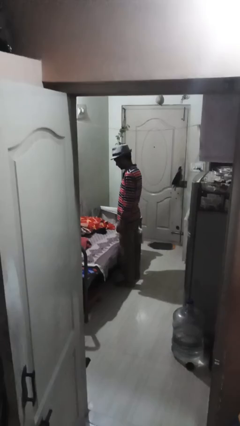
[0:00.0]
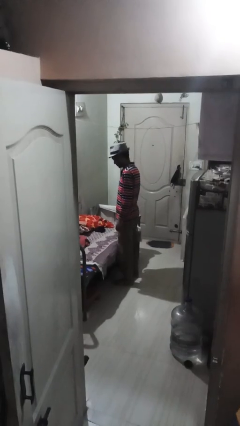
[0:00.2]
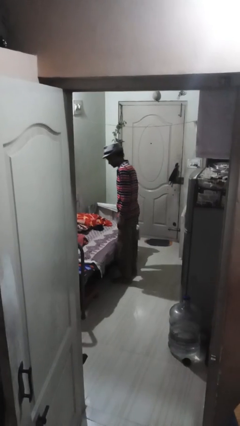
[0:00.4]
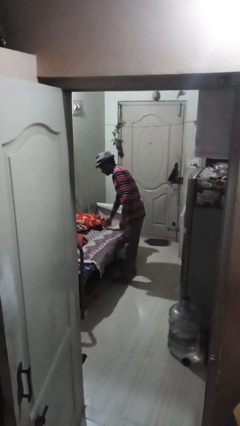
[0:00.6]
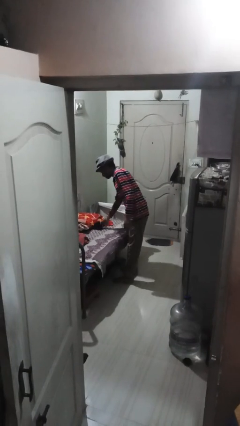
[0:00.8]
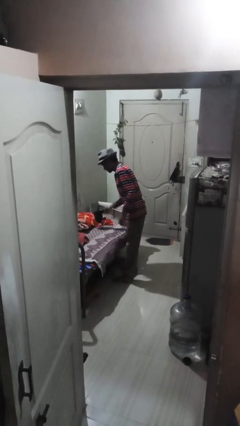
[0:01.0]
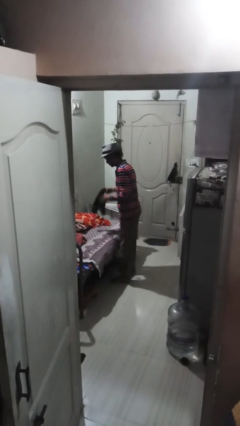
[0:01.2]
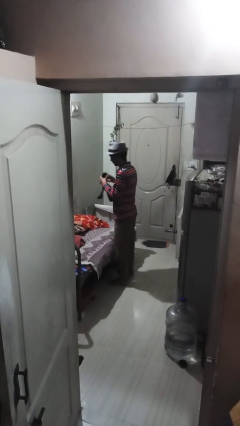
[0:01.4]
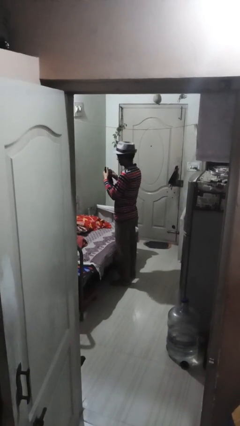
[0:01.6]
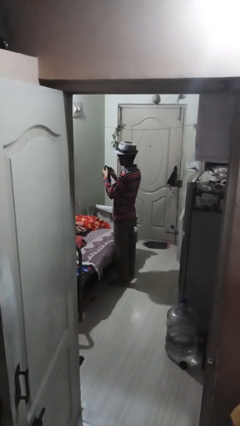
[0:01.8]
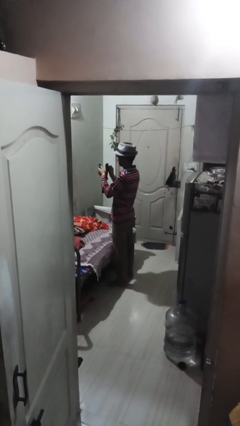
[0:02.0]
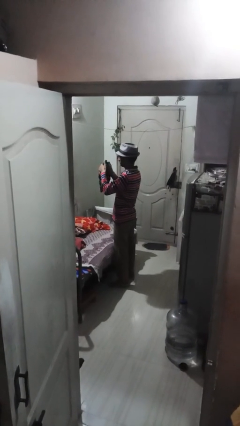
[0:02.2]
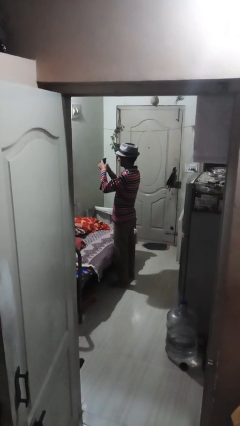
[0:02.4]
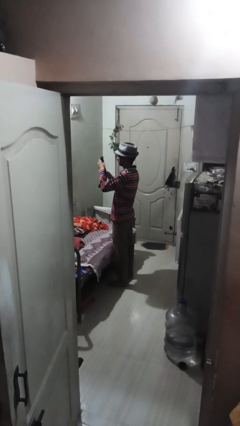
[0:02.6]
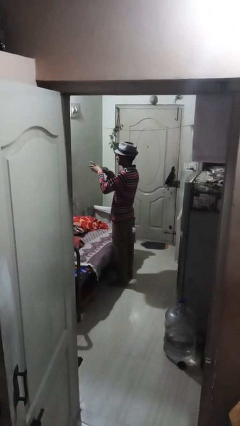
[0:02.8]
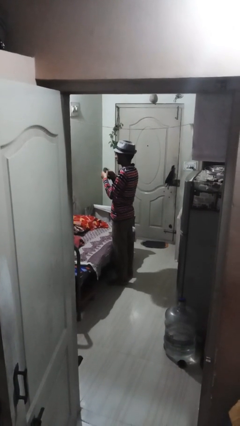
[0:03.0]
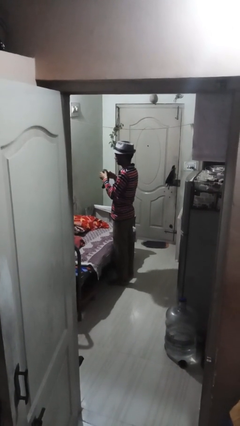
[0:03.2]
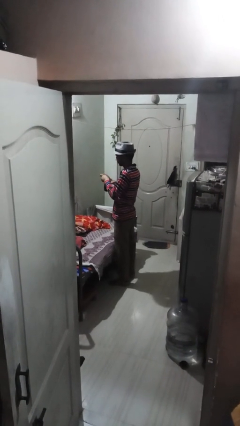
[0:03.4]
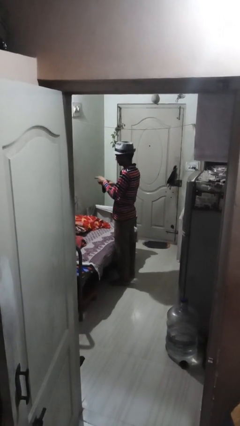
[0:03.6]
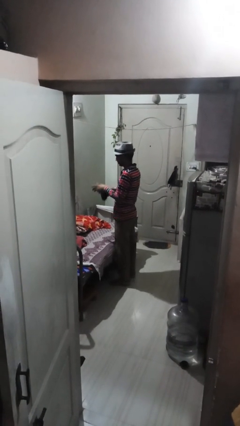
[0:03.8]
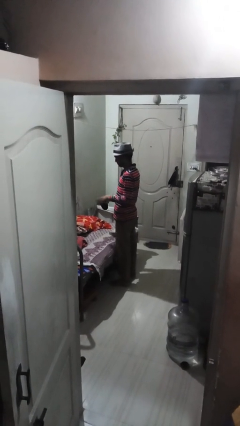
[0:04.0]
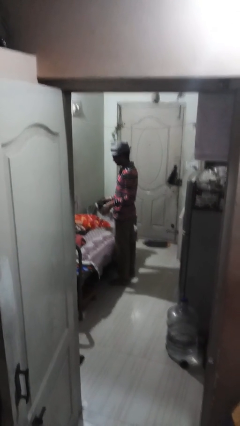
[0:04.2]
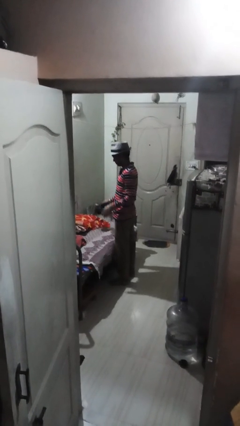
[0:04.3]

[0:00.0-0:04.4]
person folds socks

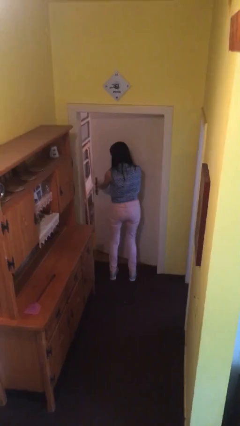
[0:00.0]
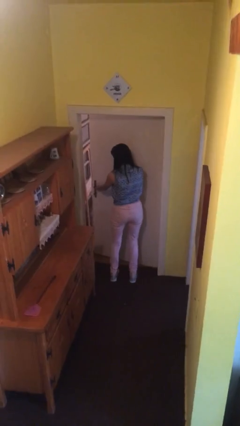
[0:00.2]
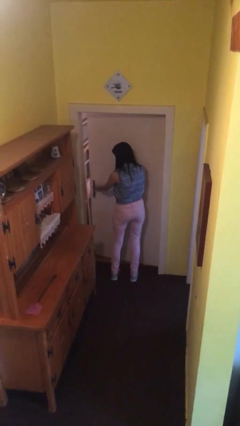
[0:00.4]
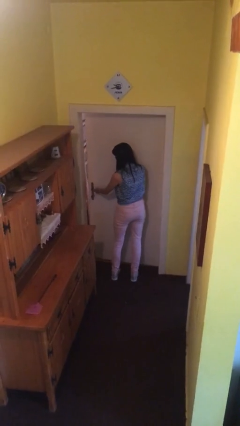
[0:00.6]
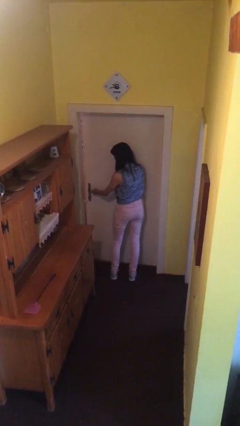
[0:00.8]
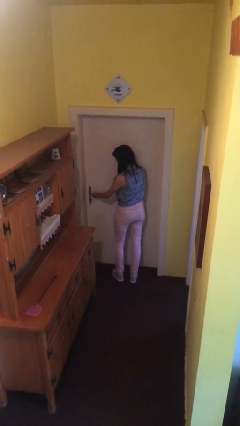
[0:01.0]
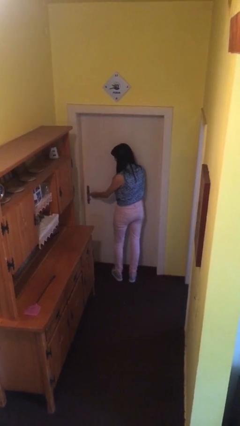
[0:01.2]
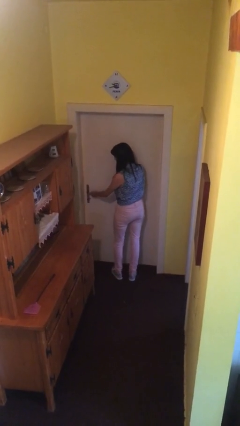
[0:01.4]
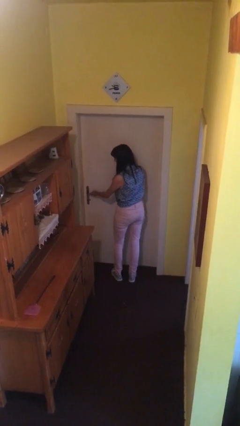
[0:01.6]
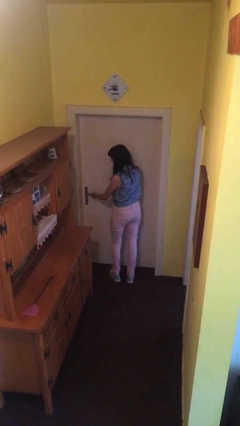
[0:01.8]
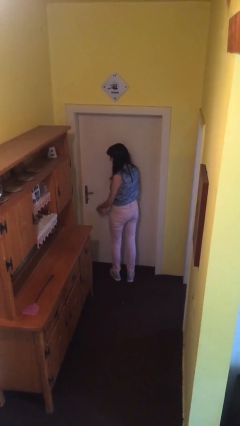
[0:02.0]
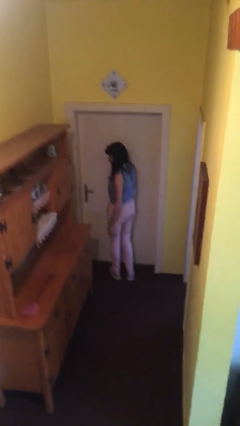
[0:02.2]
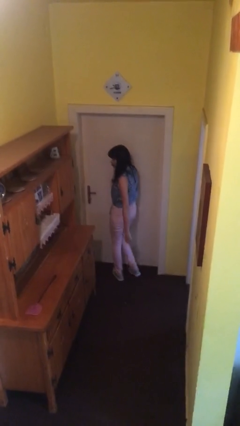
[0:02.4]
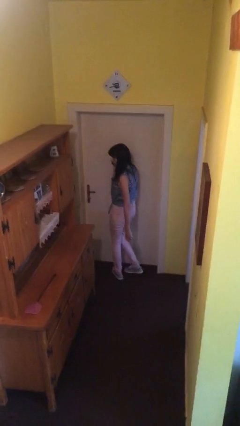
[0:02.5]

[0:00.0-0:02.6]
person closes facility door

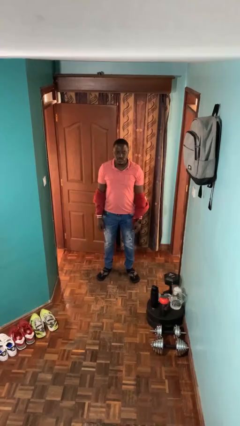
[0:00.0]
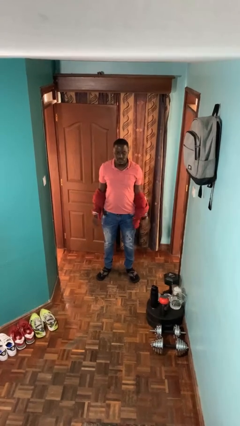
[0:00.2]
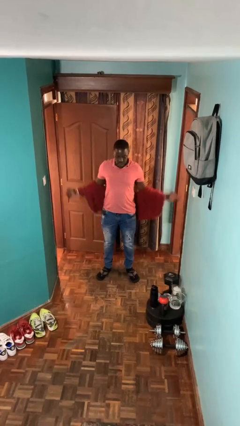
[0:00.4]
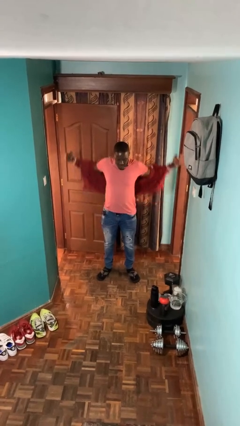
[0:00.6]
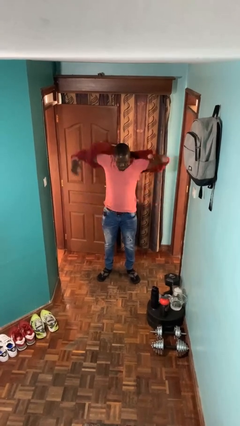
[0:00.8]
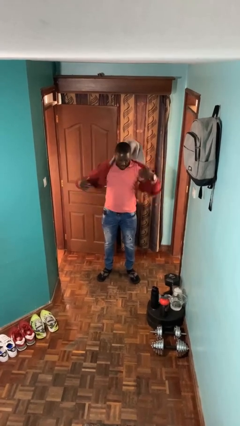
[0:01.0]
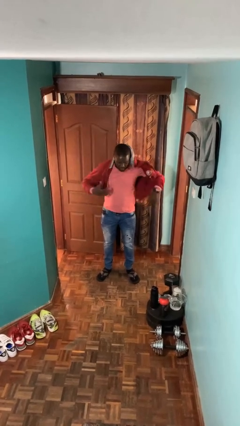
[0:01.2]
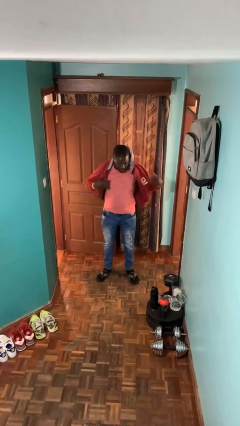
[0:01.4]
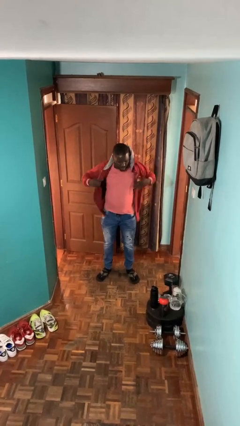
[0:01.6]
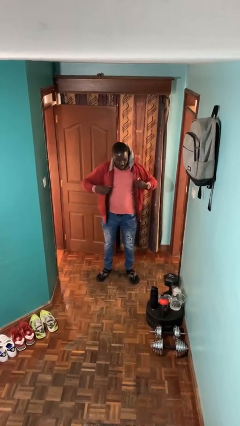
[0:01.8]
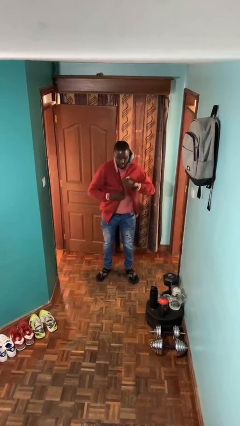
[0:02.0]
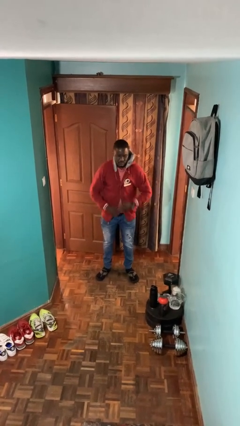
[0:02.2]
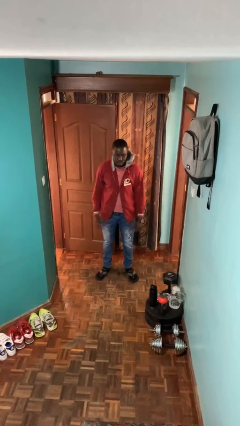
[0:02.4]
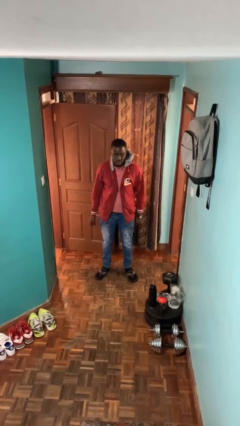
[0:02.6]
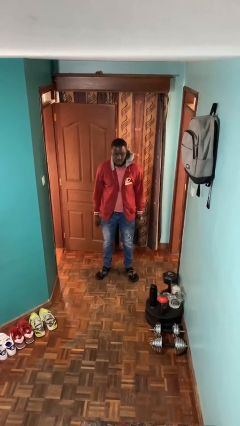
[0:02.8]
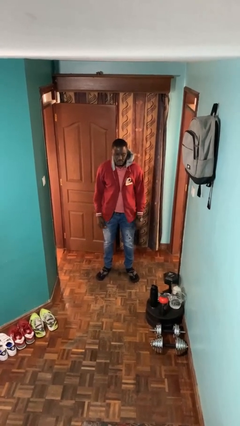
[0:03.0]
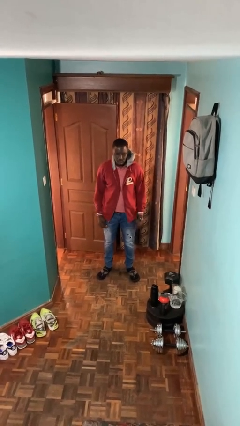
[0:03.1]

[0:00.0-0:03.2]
person puts on jacket

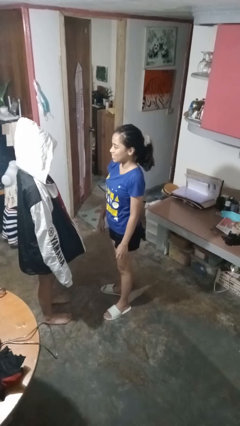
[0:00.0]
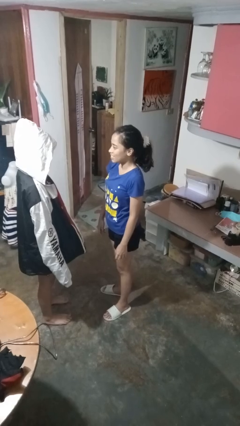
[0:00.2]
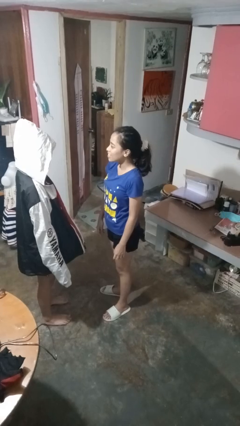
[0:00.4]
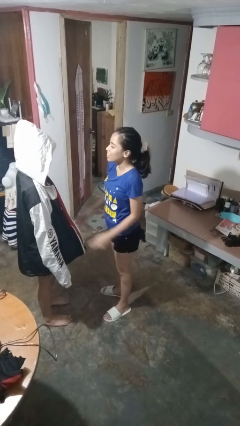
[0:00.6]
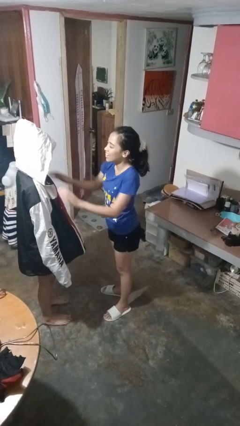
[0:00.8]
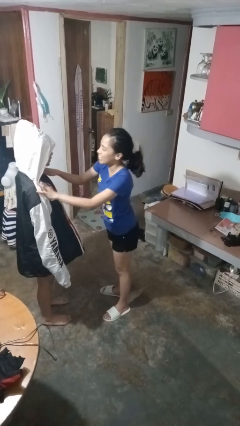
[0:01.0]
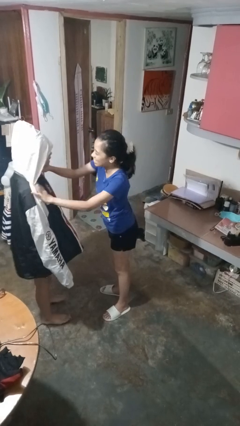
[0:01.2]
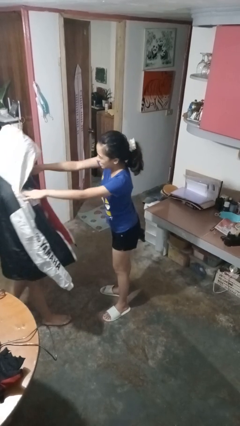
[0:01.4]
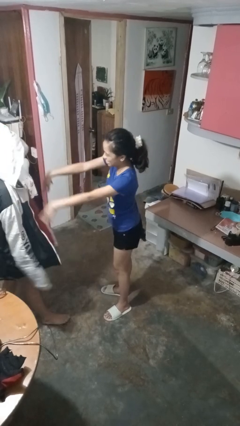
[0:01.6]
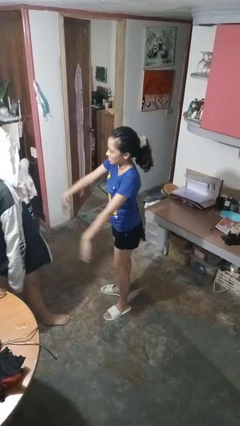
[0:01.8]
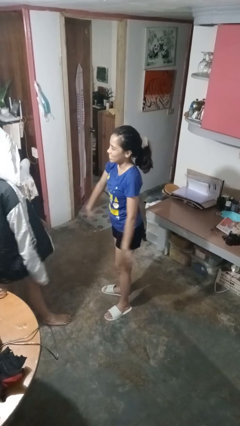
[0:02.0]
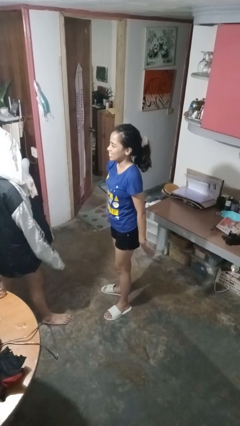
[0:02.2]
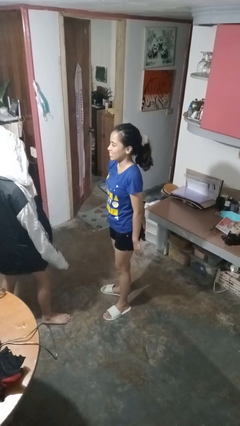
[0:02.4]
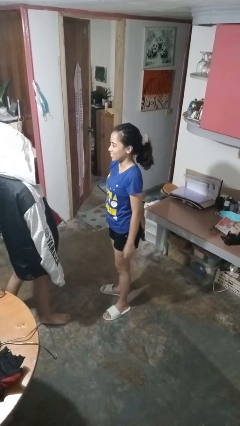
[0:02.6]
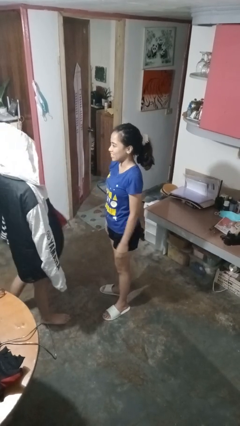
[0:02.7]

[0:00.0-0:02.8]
person shoves person

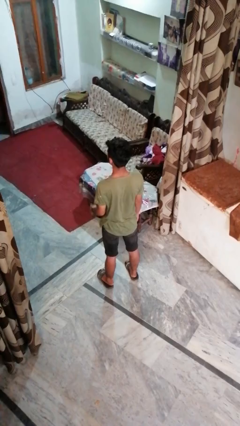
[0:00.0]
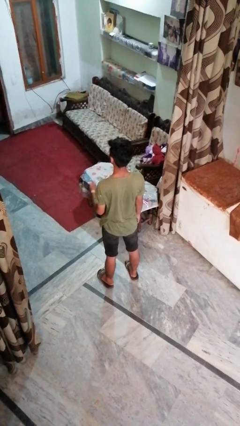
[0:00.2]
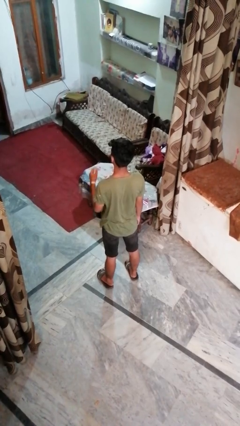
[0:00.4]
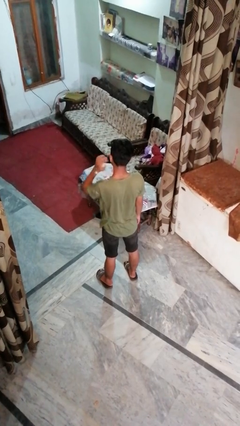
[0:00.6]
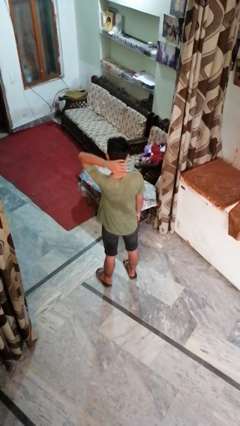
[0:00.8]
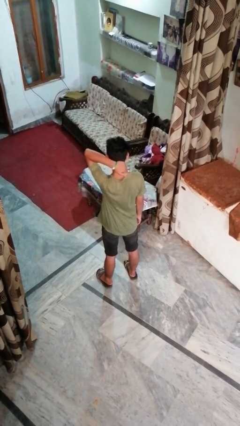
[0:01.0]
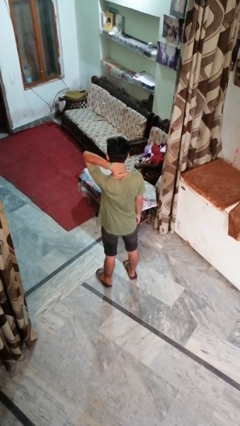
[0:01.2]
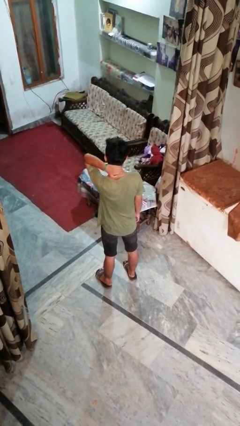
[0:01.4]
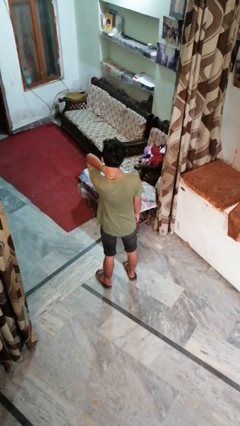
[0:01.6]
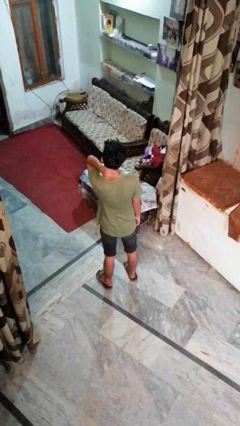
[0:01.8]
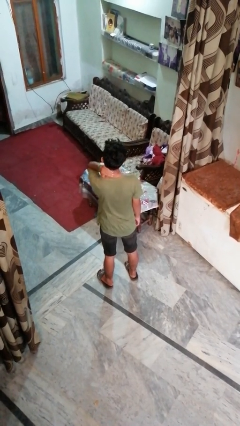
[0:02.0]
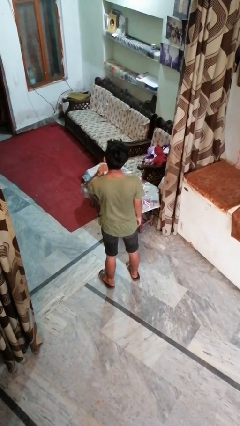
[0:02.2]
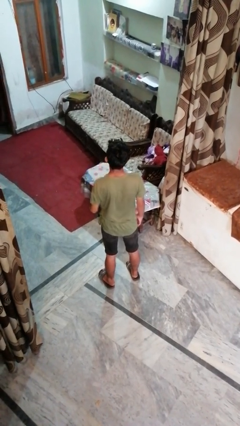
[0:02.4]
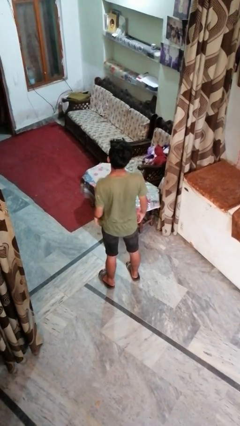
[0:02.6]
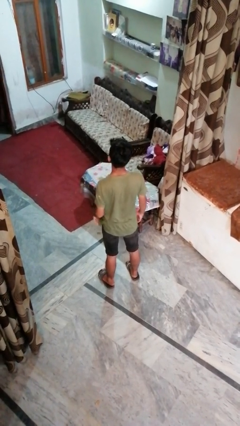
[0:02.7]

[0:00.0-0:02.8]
person rubs neck

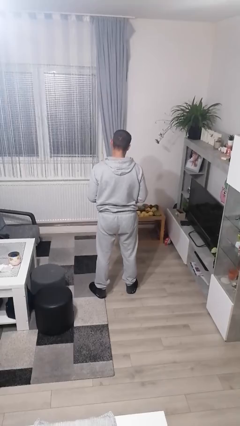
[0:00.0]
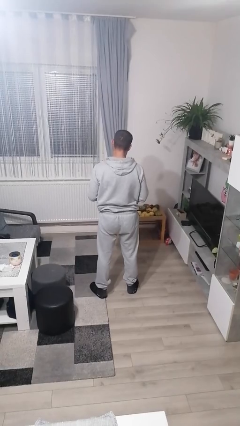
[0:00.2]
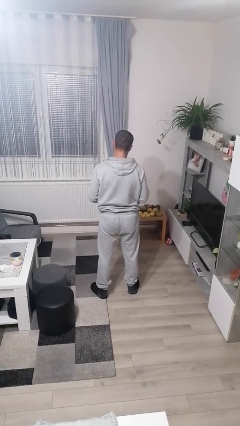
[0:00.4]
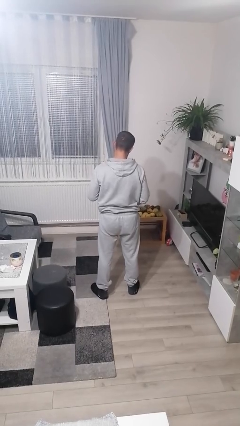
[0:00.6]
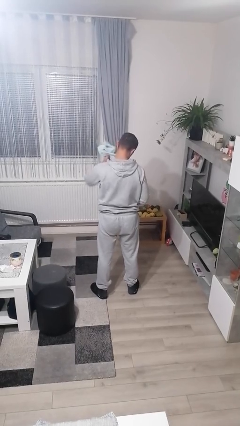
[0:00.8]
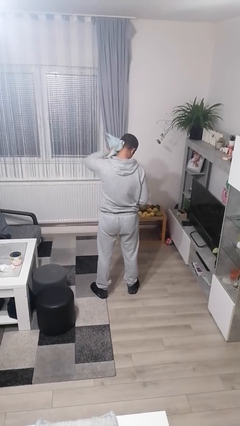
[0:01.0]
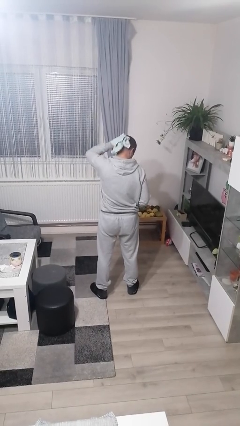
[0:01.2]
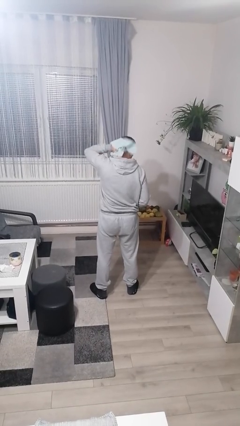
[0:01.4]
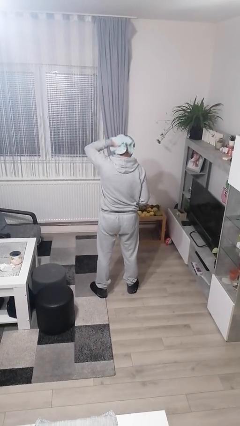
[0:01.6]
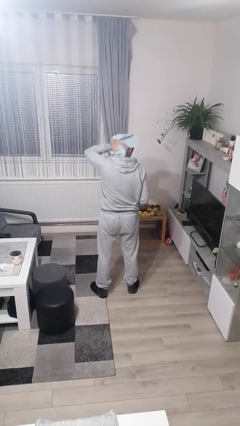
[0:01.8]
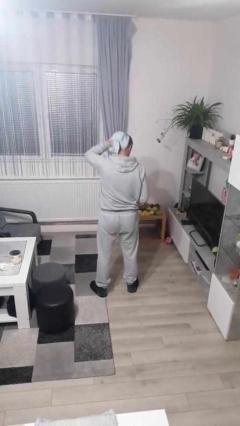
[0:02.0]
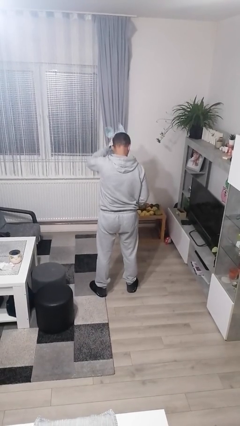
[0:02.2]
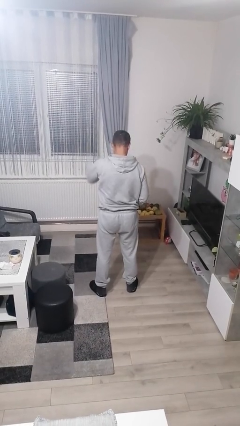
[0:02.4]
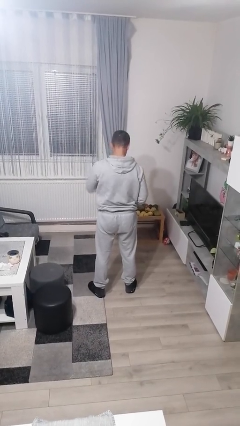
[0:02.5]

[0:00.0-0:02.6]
person dries hair with towel
